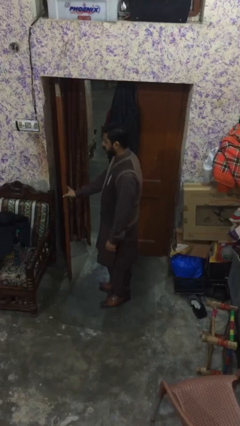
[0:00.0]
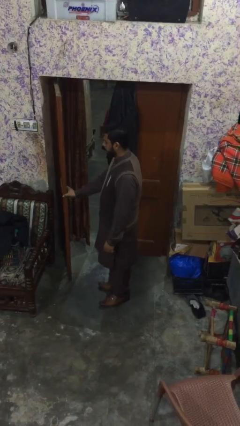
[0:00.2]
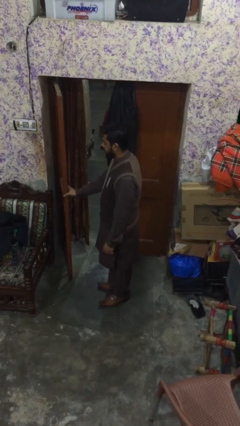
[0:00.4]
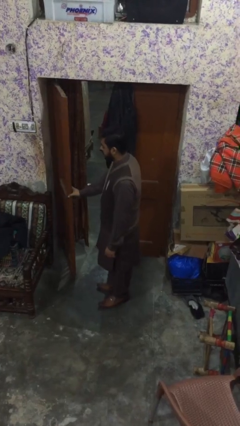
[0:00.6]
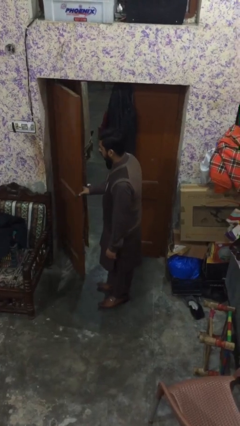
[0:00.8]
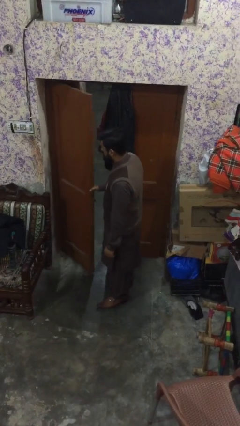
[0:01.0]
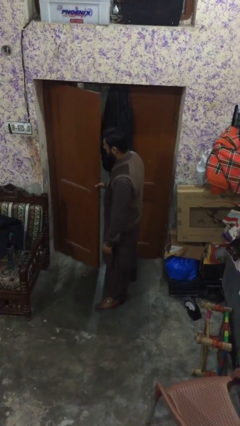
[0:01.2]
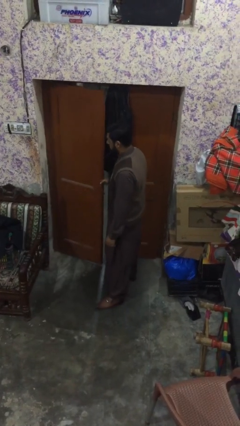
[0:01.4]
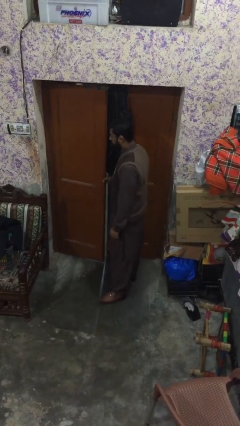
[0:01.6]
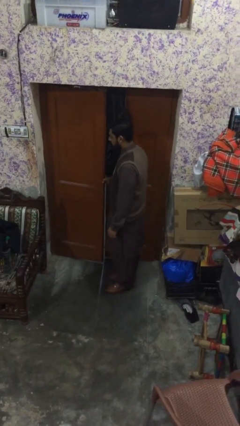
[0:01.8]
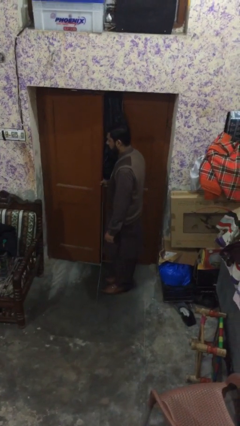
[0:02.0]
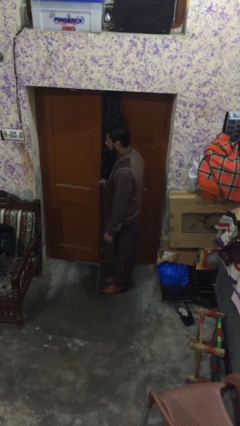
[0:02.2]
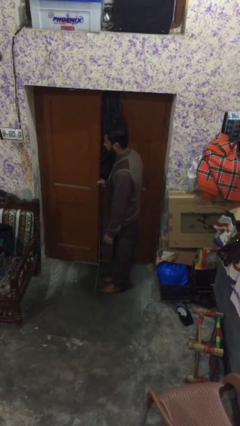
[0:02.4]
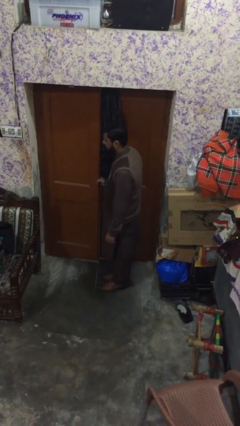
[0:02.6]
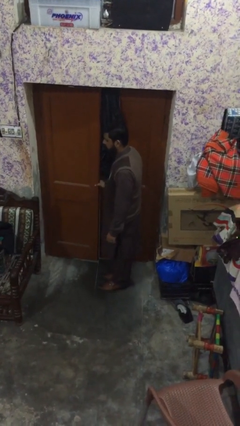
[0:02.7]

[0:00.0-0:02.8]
person closes facility door

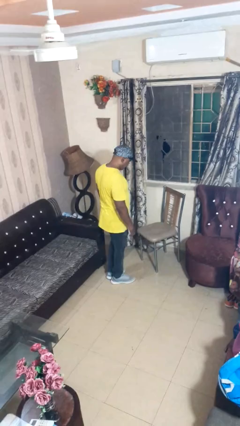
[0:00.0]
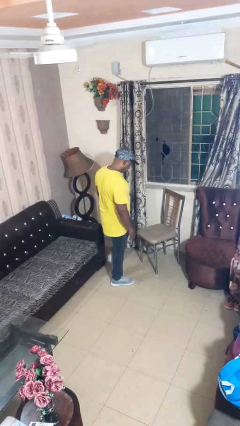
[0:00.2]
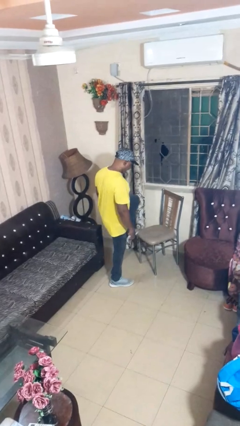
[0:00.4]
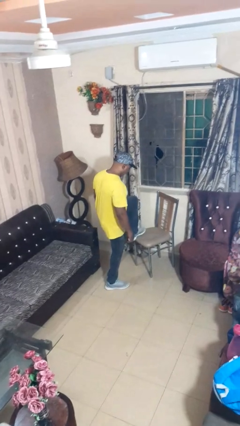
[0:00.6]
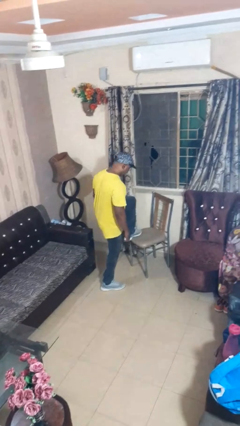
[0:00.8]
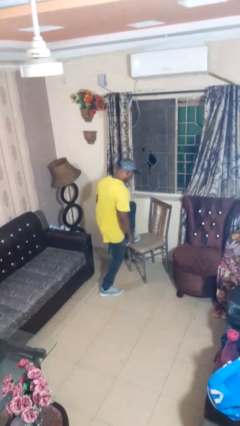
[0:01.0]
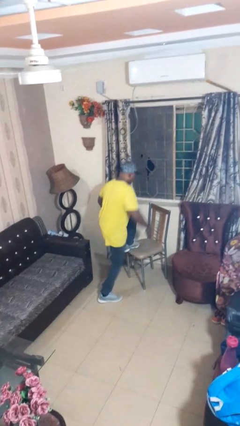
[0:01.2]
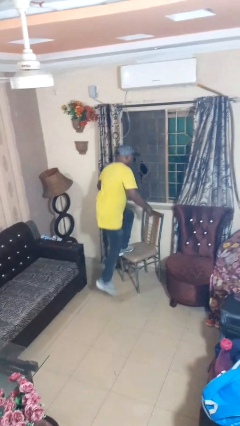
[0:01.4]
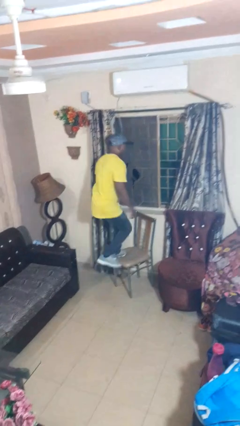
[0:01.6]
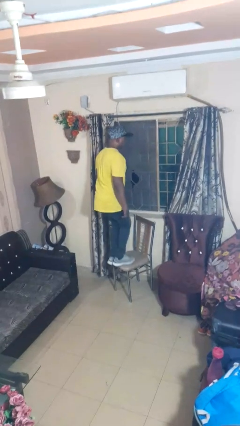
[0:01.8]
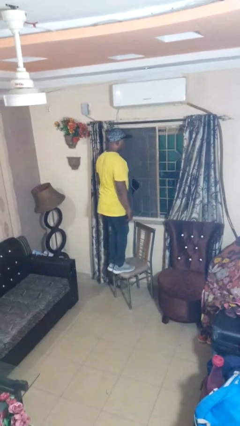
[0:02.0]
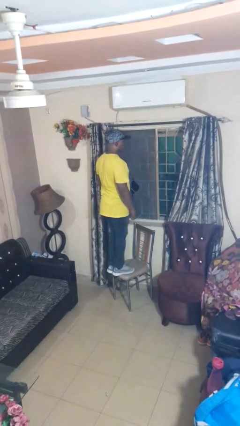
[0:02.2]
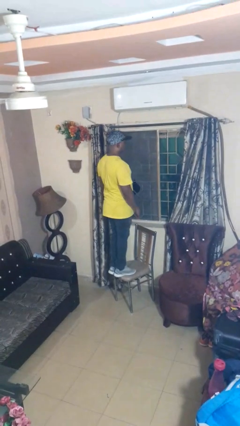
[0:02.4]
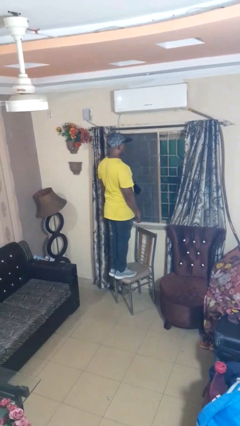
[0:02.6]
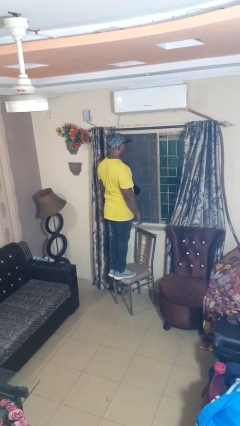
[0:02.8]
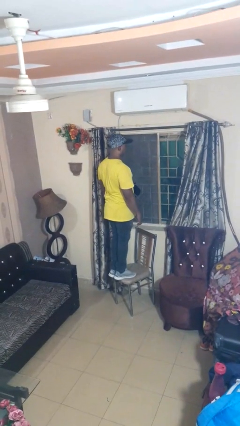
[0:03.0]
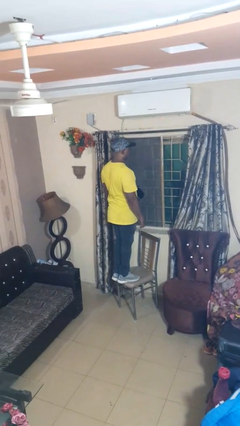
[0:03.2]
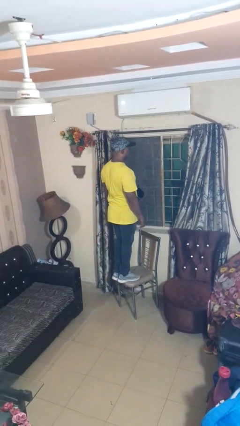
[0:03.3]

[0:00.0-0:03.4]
person climbs on chair

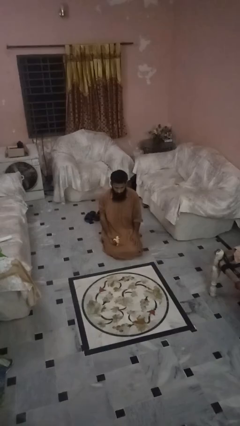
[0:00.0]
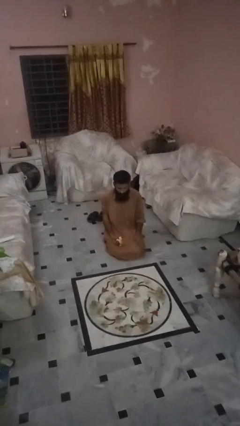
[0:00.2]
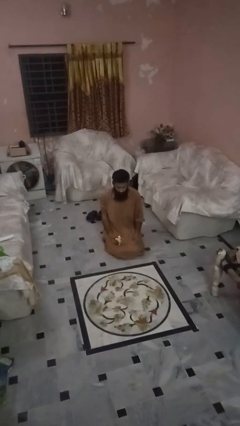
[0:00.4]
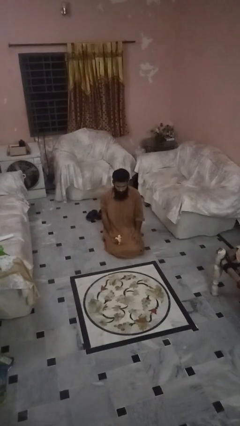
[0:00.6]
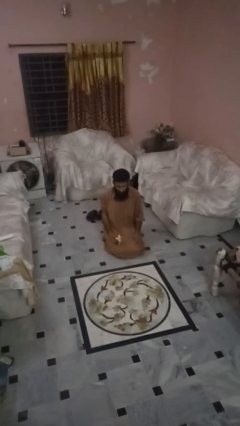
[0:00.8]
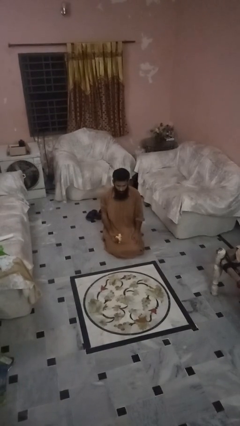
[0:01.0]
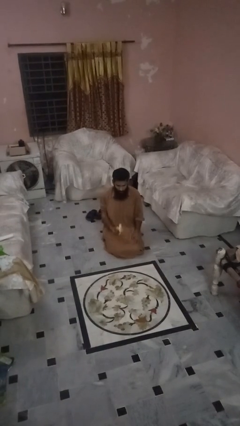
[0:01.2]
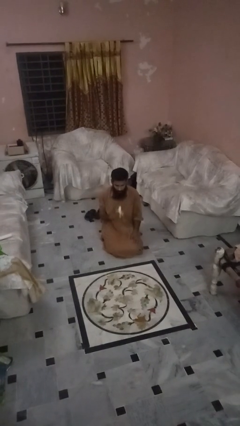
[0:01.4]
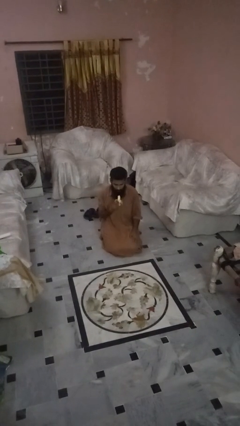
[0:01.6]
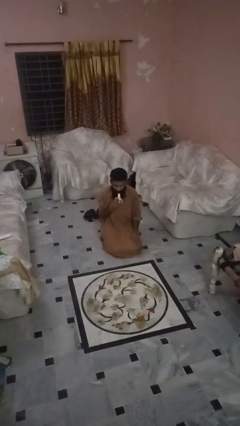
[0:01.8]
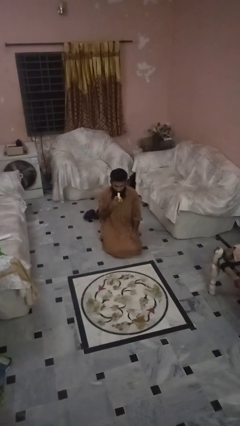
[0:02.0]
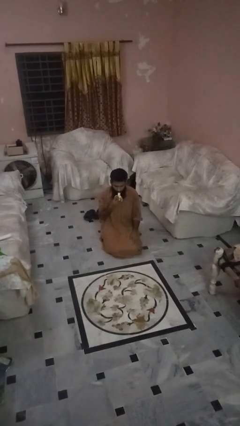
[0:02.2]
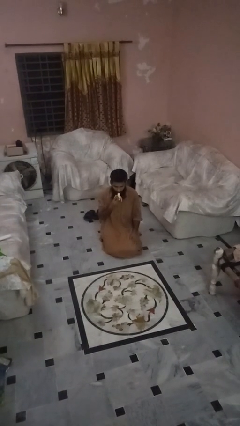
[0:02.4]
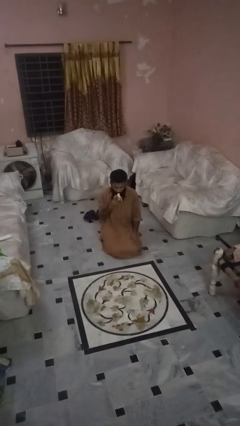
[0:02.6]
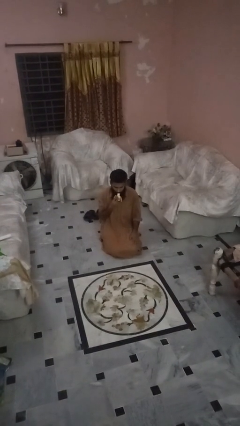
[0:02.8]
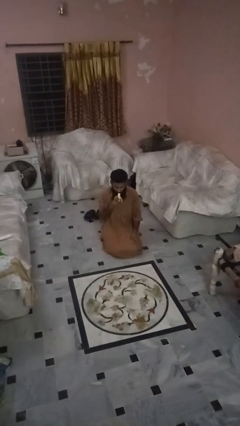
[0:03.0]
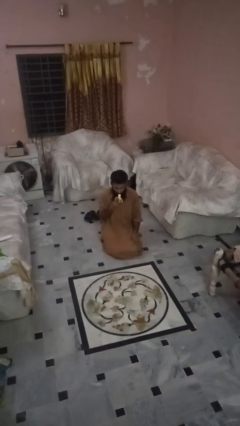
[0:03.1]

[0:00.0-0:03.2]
person eats banana

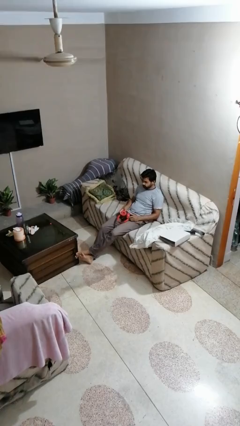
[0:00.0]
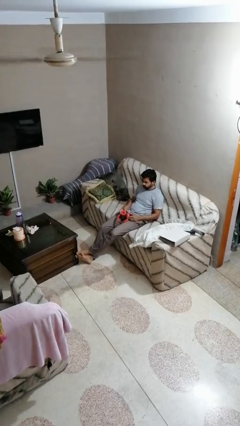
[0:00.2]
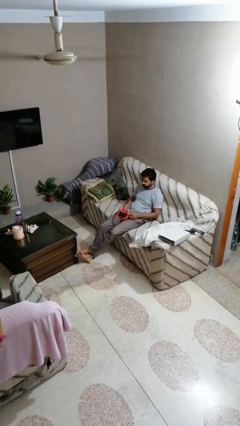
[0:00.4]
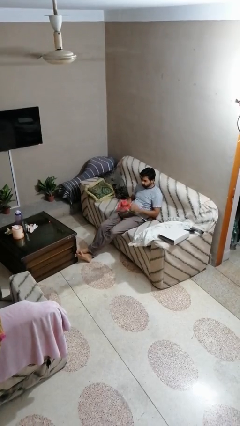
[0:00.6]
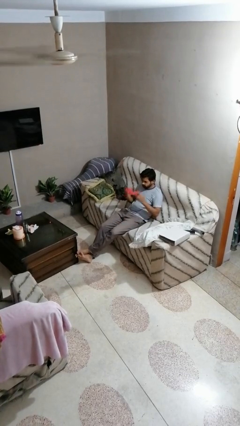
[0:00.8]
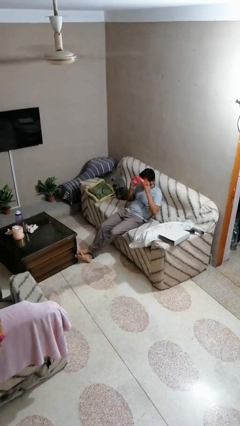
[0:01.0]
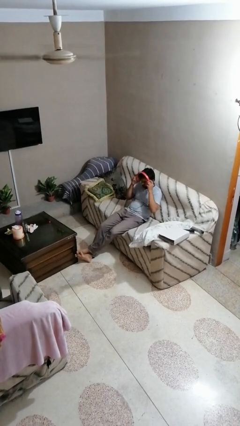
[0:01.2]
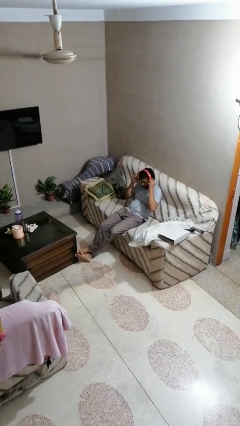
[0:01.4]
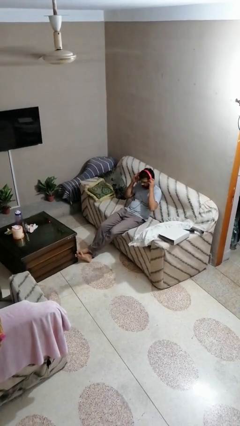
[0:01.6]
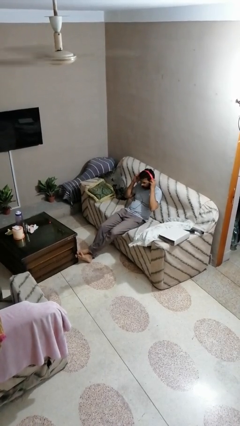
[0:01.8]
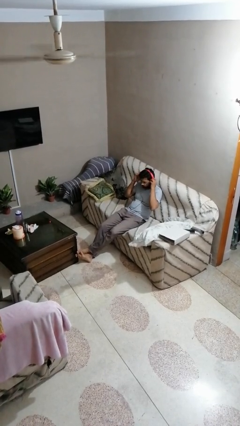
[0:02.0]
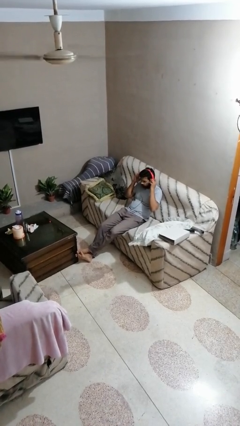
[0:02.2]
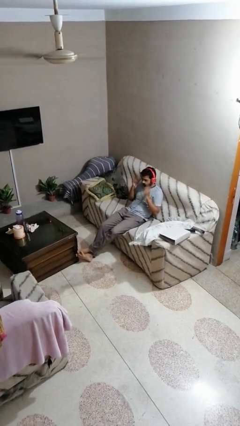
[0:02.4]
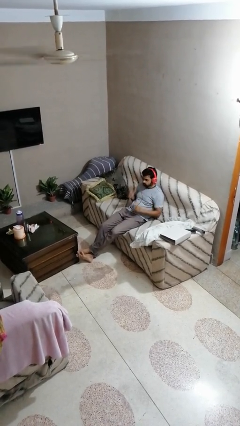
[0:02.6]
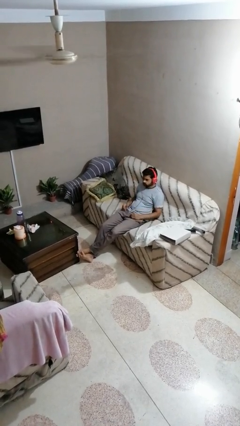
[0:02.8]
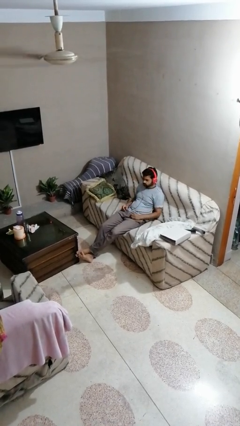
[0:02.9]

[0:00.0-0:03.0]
person puts on headphones

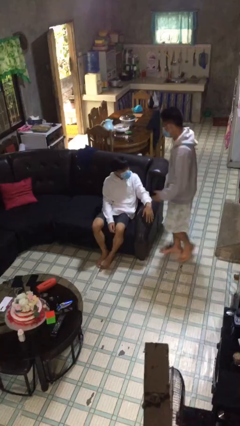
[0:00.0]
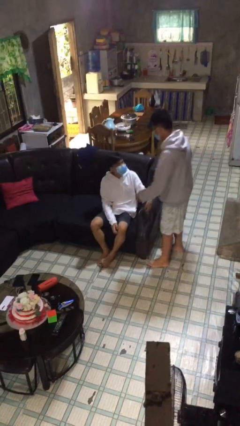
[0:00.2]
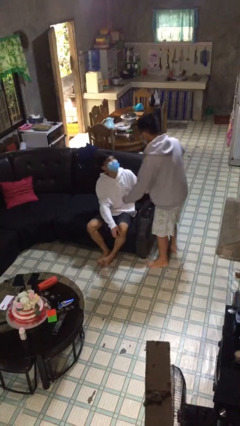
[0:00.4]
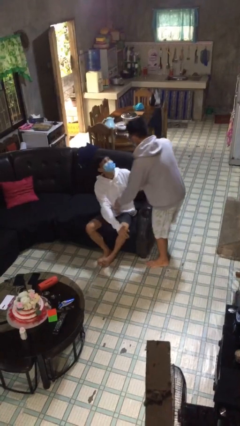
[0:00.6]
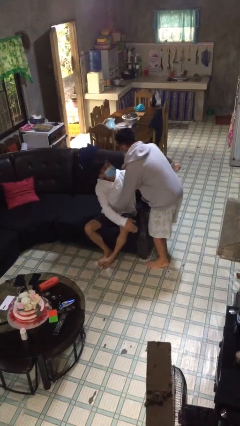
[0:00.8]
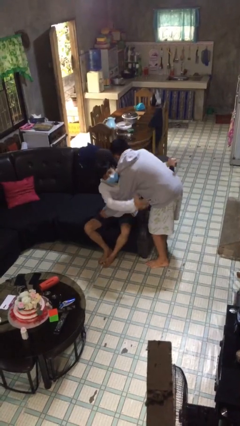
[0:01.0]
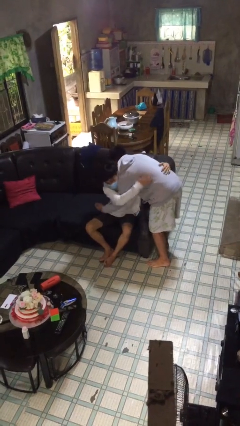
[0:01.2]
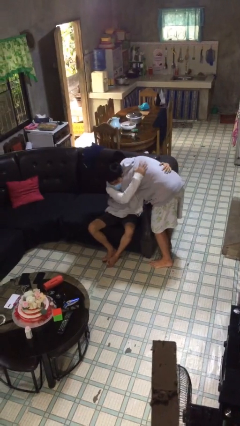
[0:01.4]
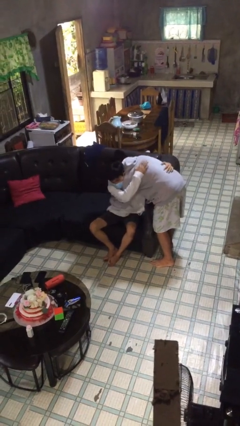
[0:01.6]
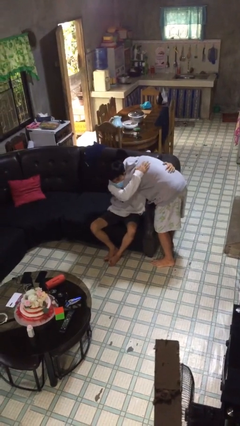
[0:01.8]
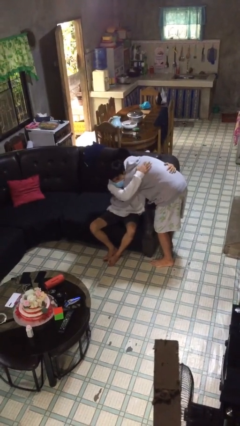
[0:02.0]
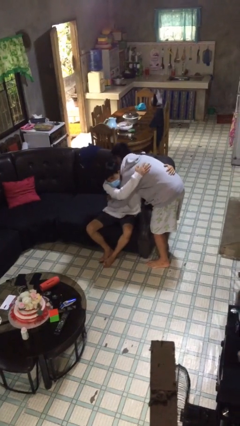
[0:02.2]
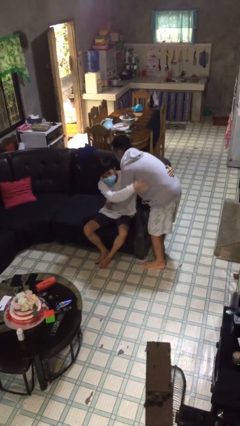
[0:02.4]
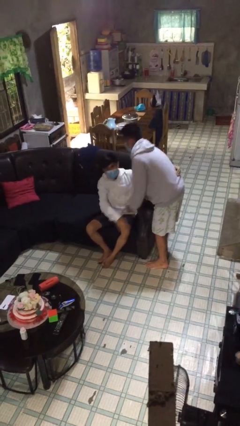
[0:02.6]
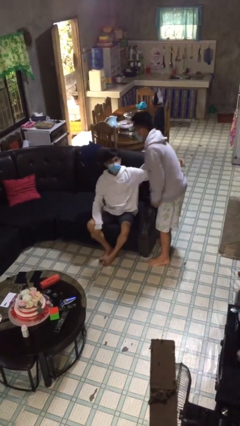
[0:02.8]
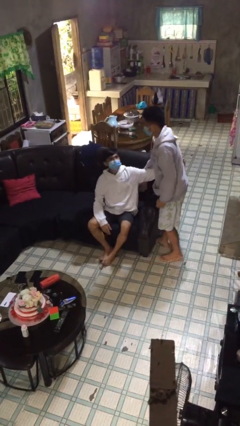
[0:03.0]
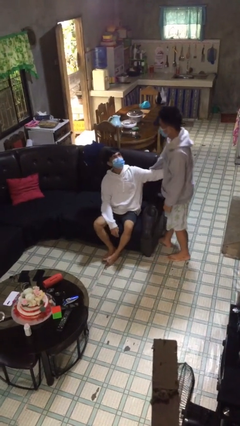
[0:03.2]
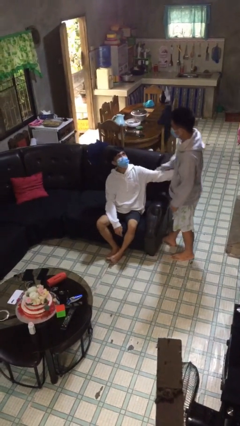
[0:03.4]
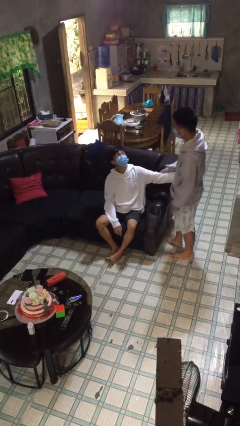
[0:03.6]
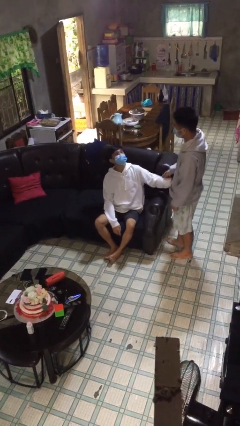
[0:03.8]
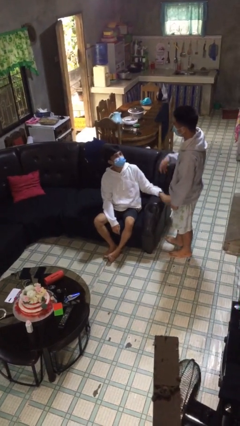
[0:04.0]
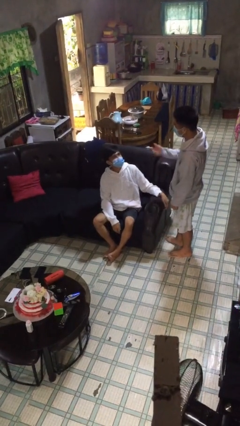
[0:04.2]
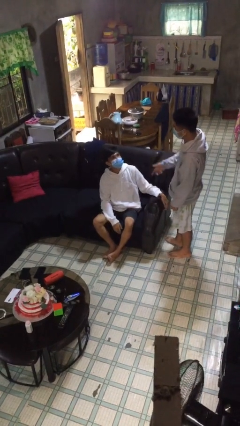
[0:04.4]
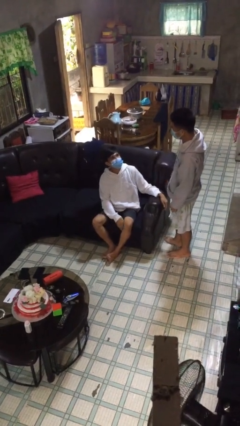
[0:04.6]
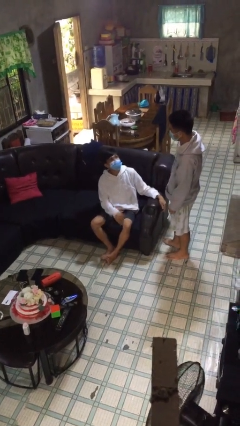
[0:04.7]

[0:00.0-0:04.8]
person embraces person

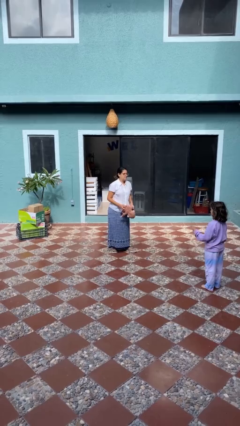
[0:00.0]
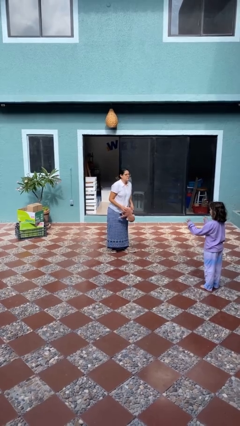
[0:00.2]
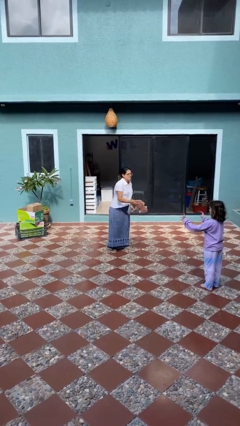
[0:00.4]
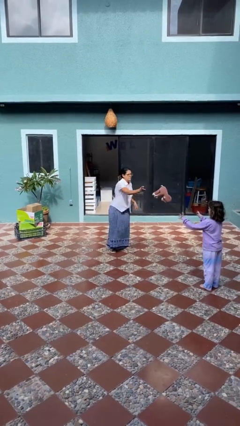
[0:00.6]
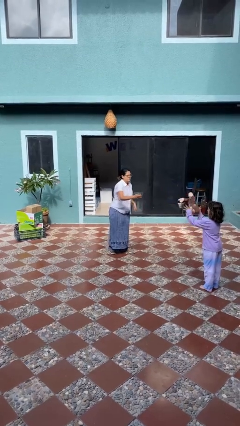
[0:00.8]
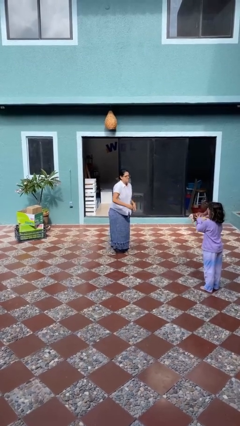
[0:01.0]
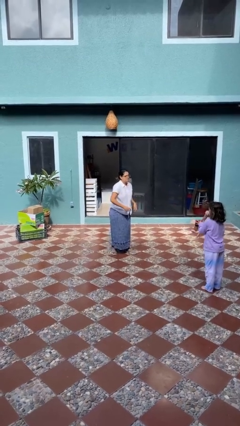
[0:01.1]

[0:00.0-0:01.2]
person throws object to person
